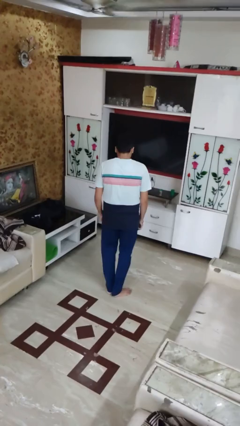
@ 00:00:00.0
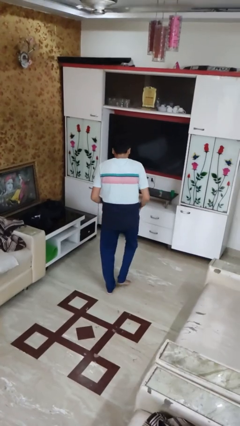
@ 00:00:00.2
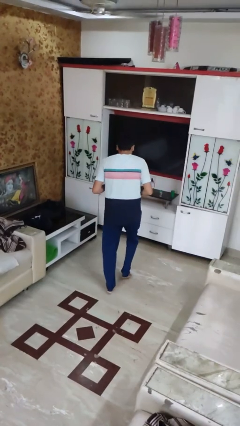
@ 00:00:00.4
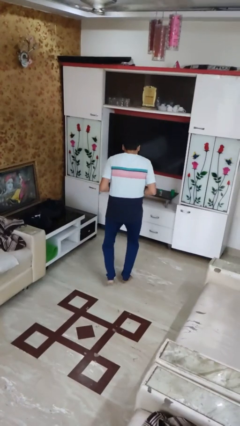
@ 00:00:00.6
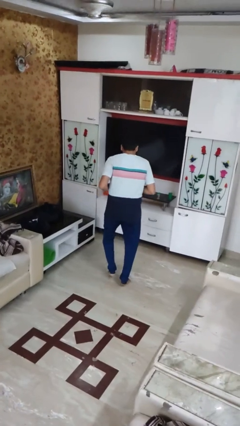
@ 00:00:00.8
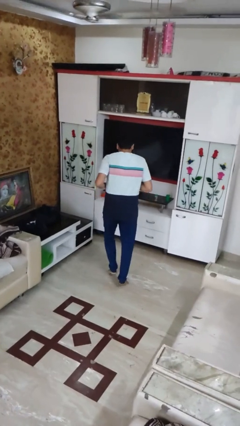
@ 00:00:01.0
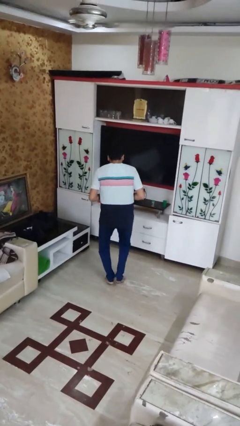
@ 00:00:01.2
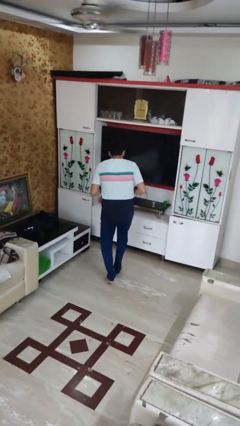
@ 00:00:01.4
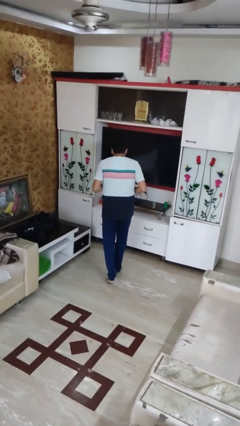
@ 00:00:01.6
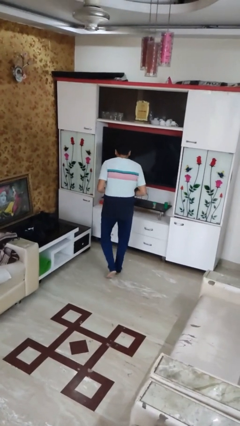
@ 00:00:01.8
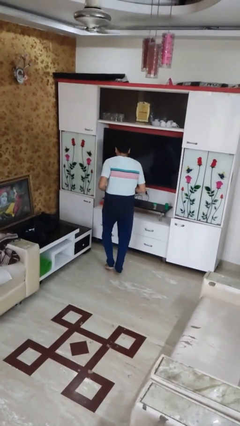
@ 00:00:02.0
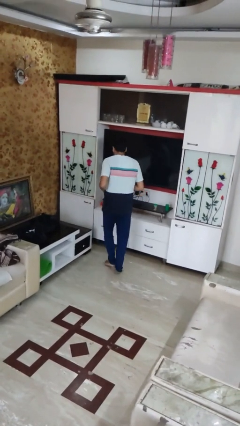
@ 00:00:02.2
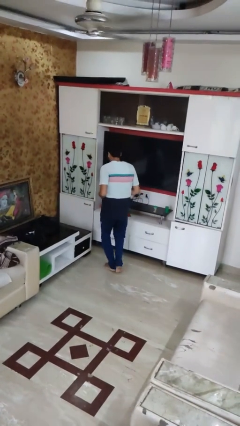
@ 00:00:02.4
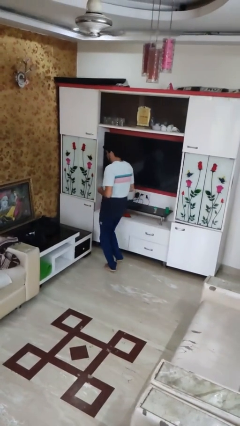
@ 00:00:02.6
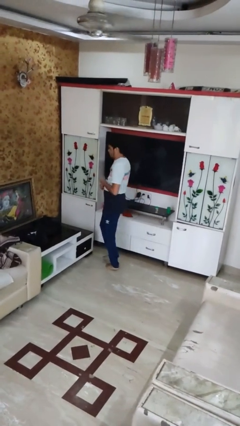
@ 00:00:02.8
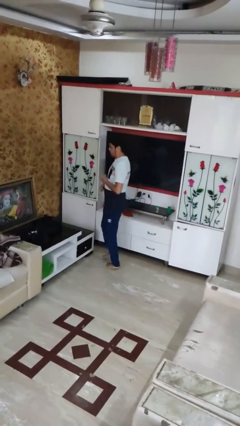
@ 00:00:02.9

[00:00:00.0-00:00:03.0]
person walks tiptoe

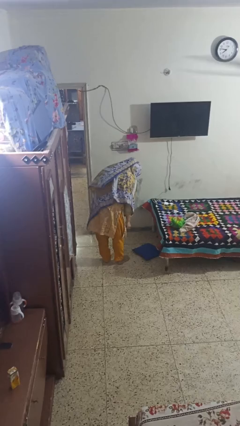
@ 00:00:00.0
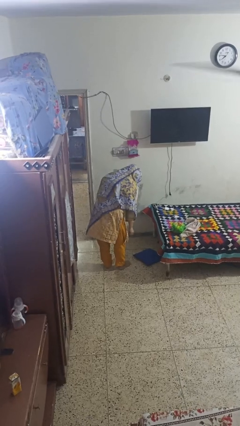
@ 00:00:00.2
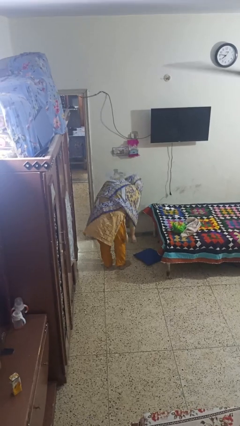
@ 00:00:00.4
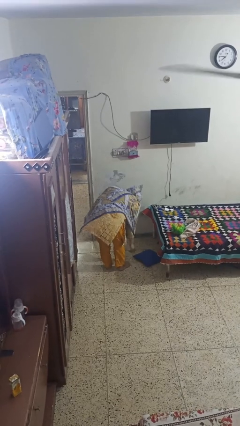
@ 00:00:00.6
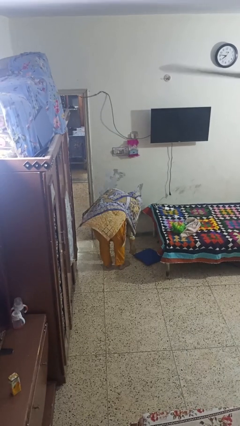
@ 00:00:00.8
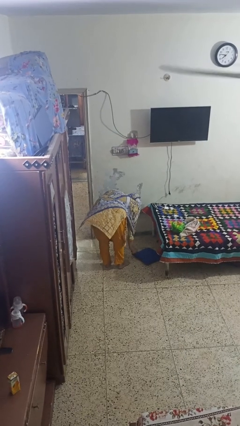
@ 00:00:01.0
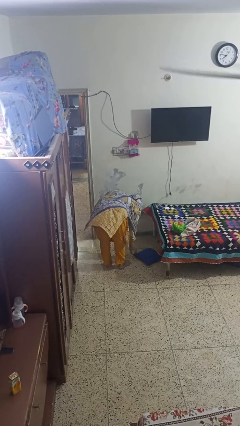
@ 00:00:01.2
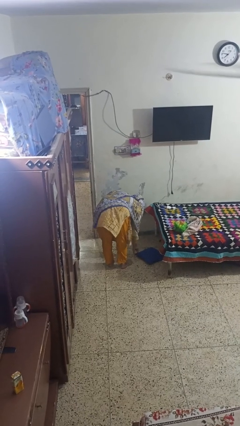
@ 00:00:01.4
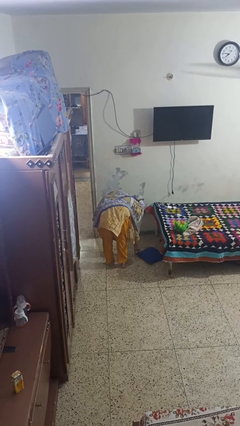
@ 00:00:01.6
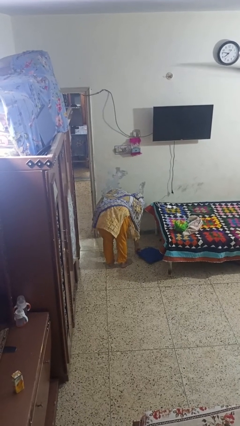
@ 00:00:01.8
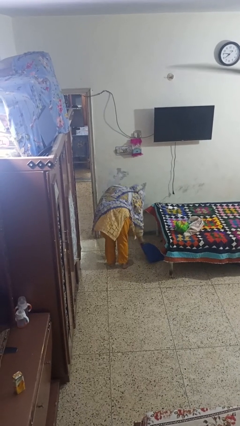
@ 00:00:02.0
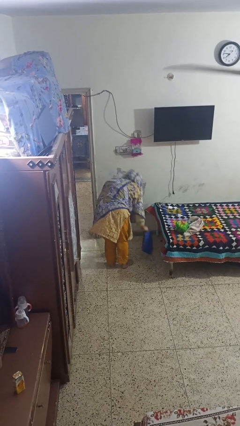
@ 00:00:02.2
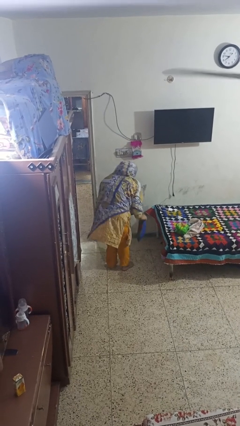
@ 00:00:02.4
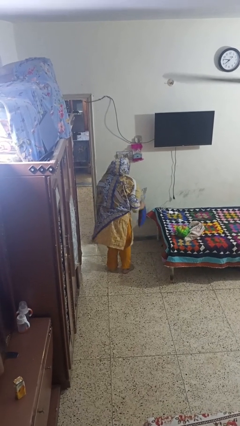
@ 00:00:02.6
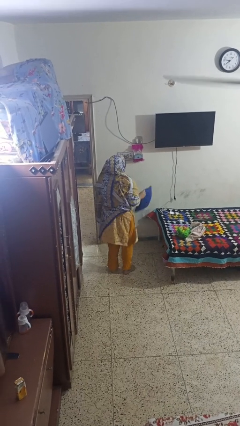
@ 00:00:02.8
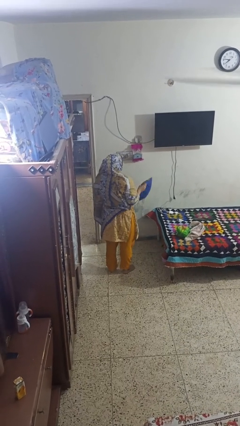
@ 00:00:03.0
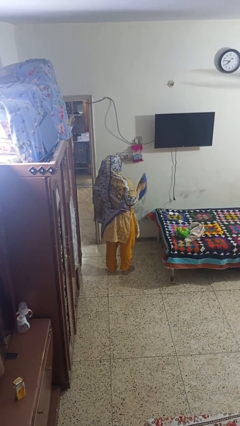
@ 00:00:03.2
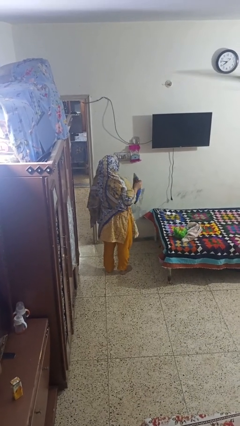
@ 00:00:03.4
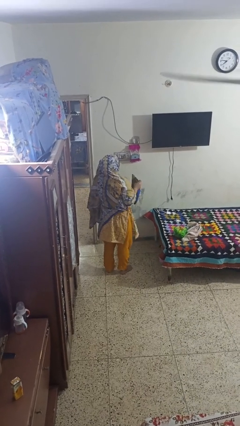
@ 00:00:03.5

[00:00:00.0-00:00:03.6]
person picks up object from floor

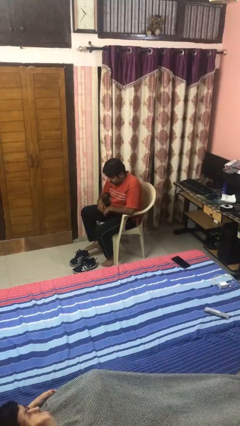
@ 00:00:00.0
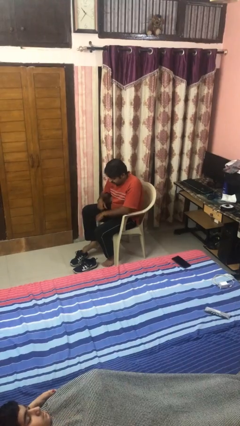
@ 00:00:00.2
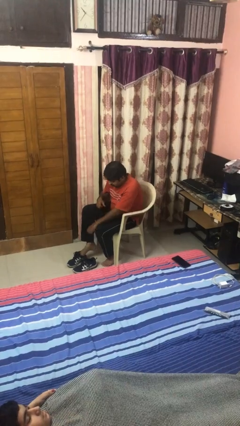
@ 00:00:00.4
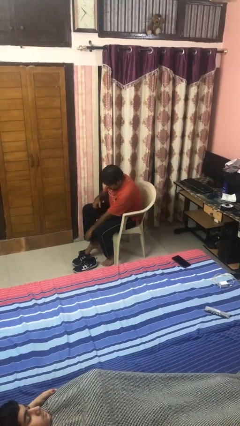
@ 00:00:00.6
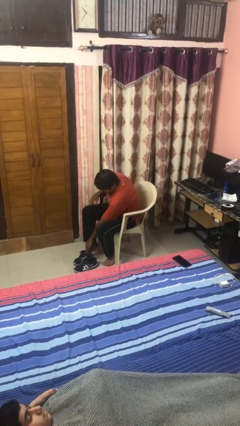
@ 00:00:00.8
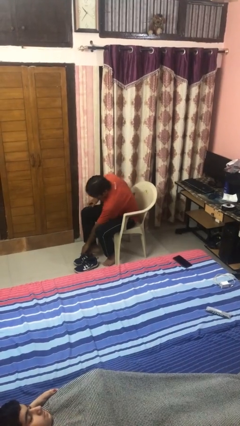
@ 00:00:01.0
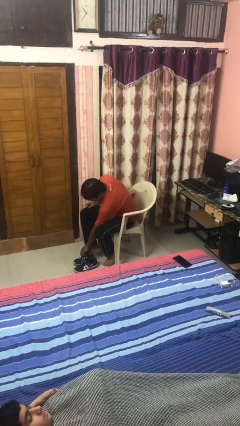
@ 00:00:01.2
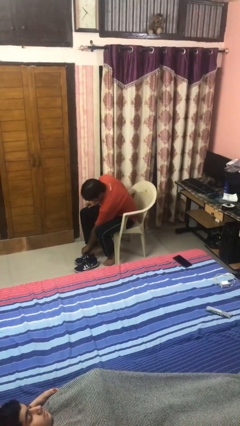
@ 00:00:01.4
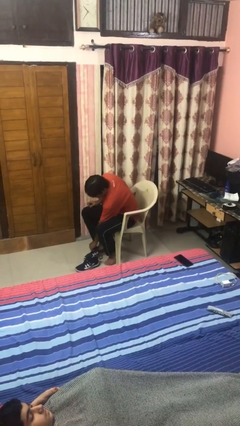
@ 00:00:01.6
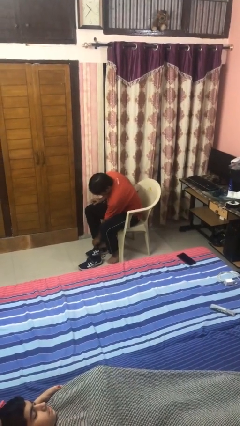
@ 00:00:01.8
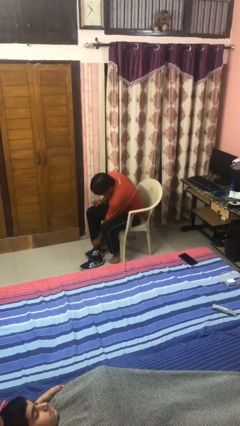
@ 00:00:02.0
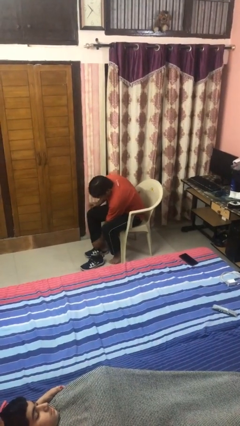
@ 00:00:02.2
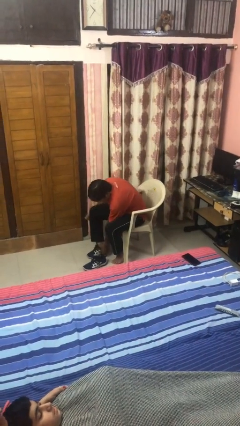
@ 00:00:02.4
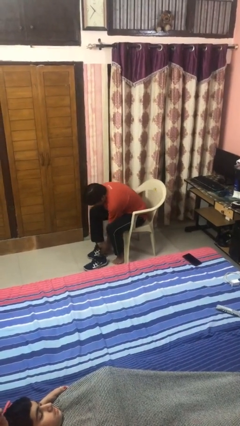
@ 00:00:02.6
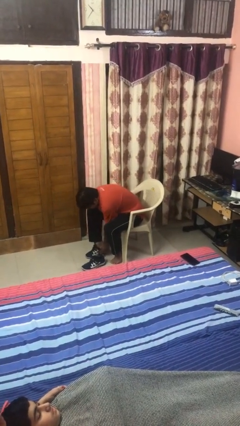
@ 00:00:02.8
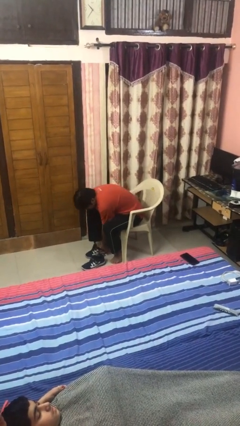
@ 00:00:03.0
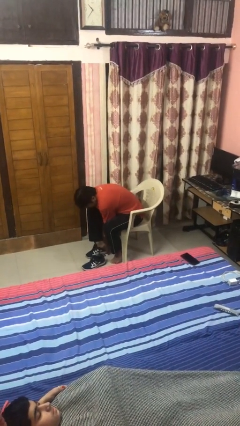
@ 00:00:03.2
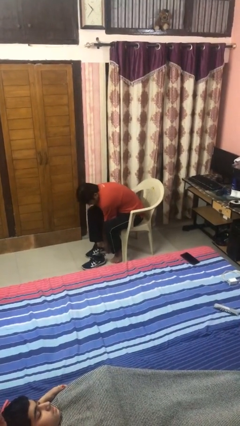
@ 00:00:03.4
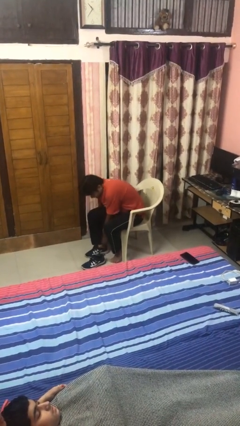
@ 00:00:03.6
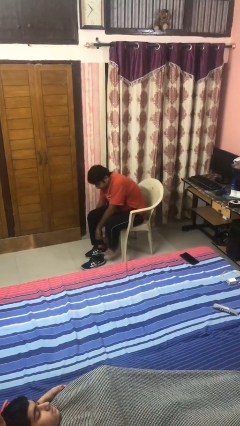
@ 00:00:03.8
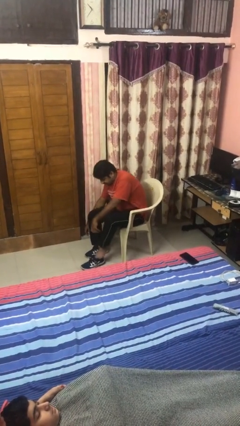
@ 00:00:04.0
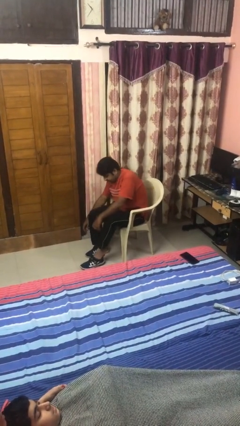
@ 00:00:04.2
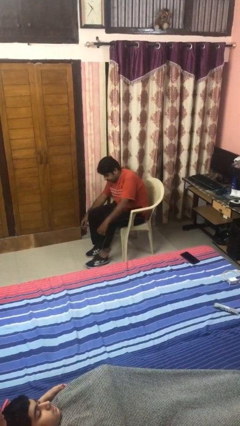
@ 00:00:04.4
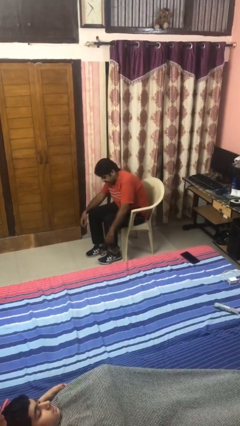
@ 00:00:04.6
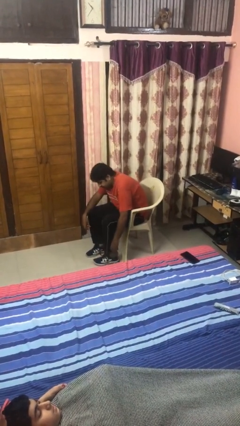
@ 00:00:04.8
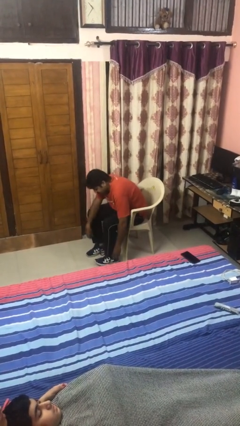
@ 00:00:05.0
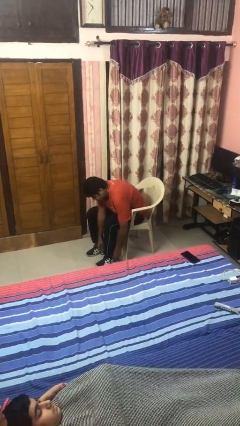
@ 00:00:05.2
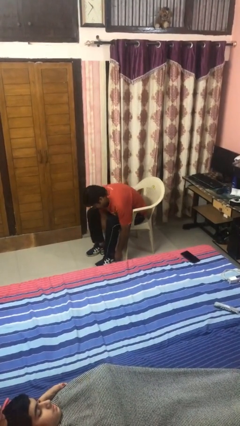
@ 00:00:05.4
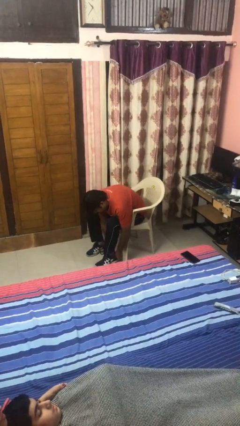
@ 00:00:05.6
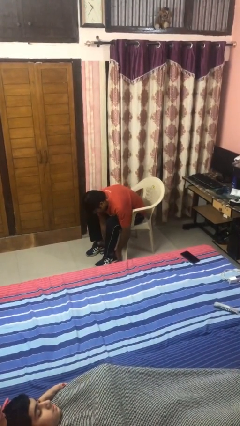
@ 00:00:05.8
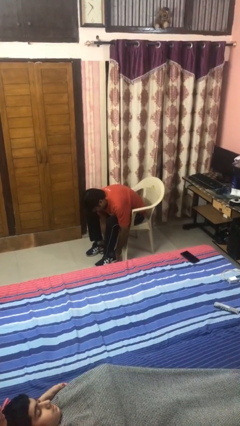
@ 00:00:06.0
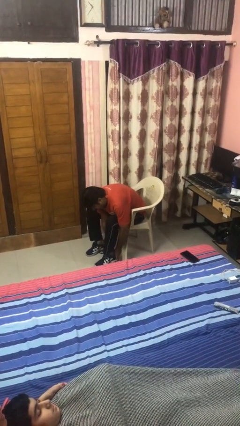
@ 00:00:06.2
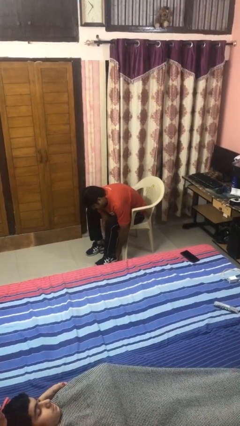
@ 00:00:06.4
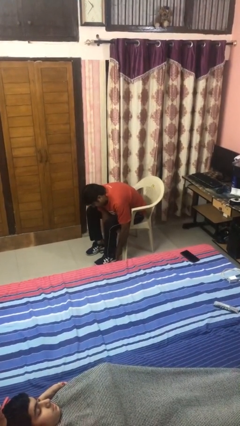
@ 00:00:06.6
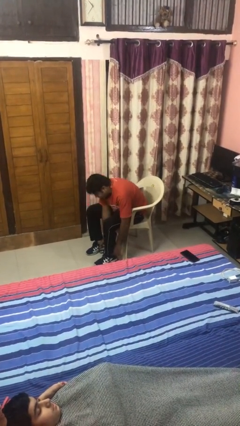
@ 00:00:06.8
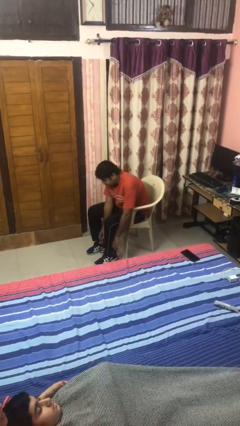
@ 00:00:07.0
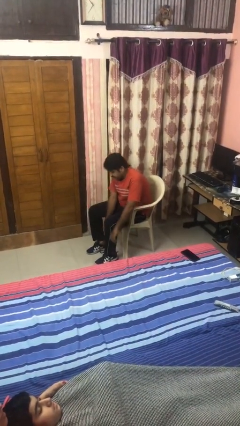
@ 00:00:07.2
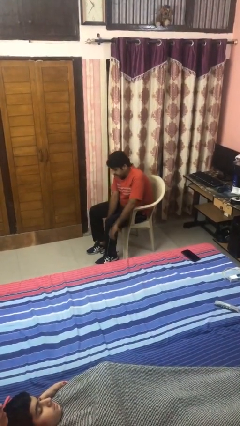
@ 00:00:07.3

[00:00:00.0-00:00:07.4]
person puts on boots

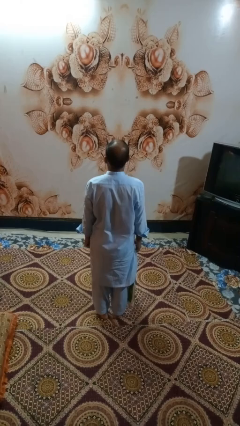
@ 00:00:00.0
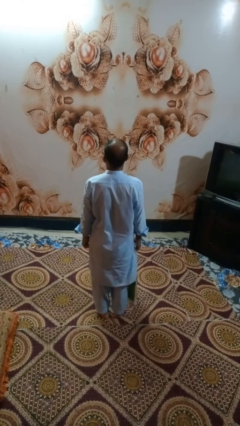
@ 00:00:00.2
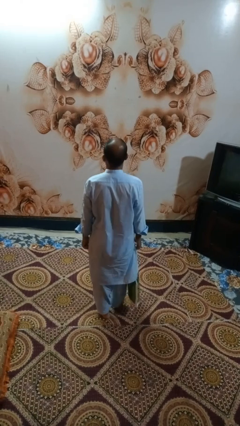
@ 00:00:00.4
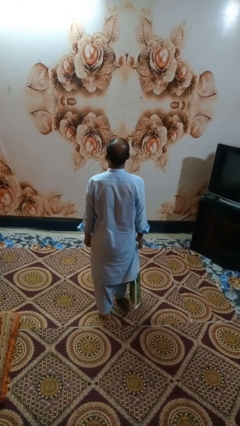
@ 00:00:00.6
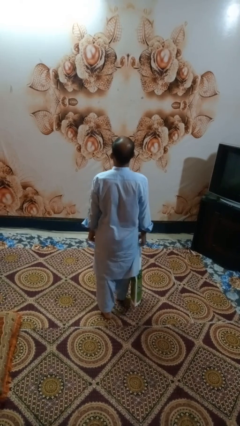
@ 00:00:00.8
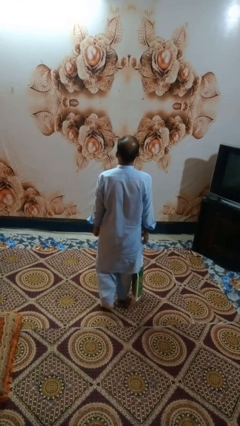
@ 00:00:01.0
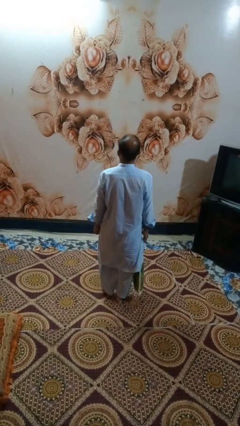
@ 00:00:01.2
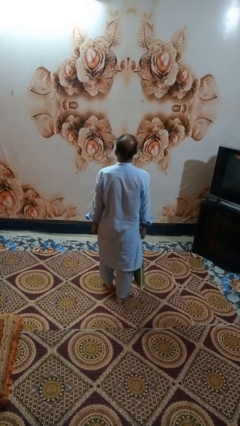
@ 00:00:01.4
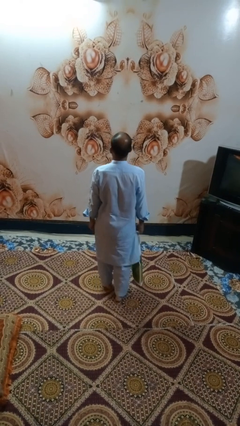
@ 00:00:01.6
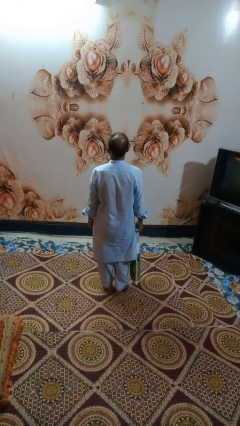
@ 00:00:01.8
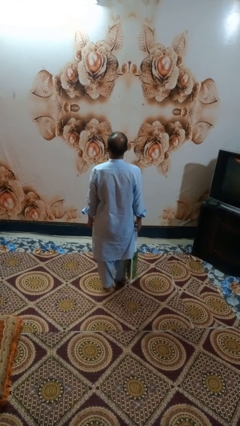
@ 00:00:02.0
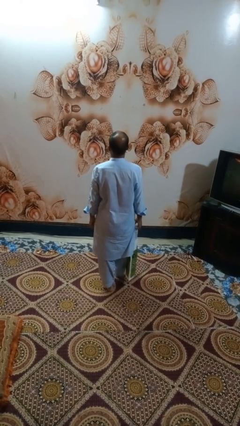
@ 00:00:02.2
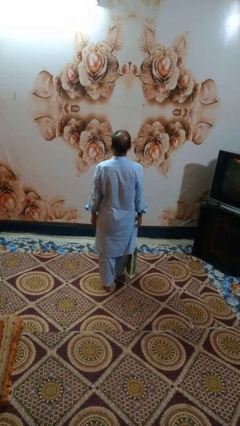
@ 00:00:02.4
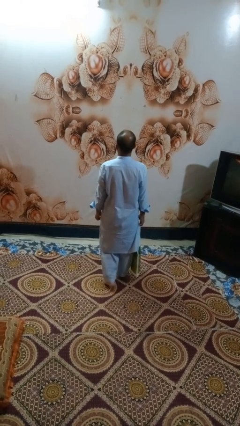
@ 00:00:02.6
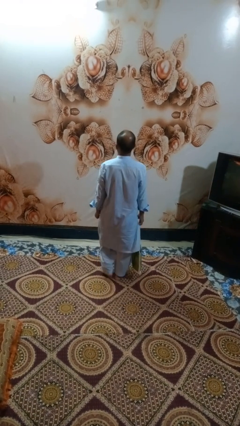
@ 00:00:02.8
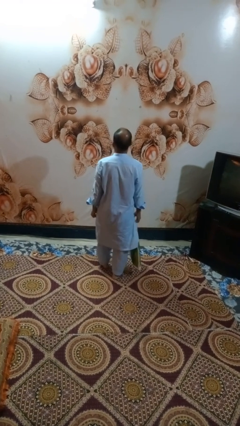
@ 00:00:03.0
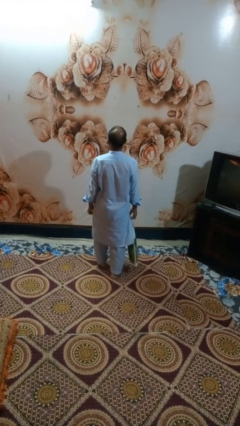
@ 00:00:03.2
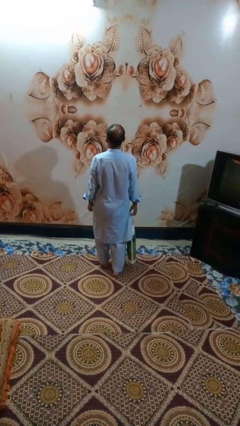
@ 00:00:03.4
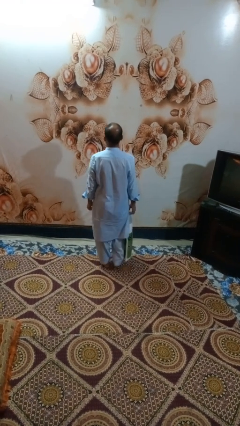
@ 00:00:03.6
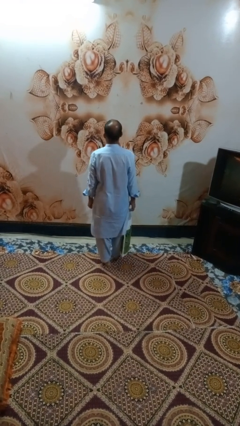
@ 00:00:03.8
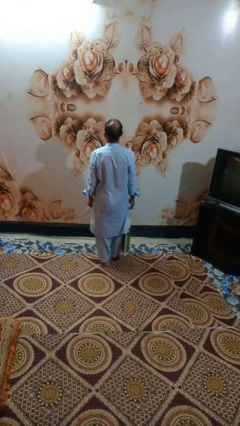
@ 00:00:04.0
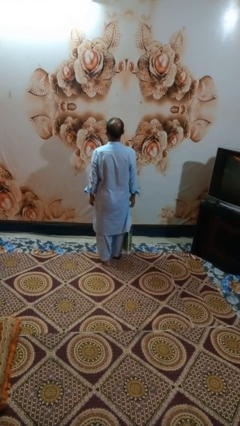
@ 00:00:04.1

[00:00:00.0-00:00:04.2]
person carries groceries
